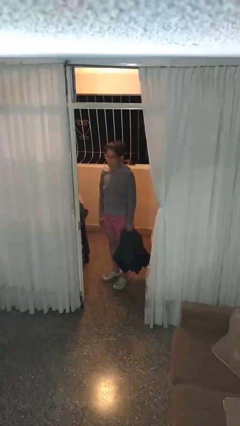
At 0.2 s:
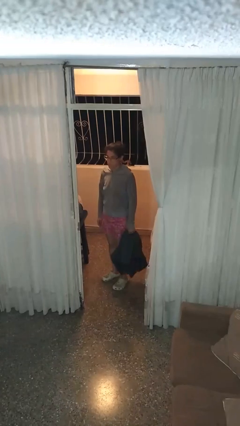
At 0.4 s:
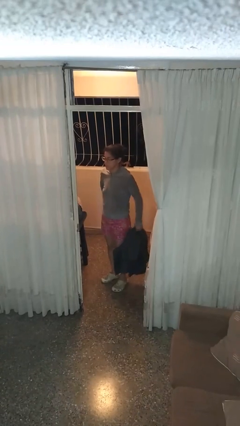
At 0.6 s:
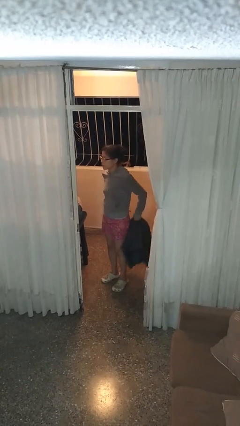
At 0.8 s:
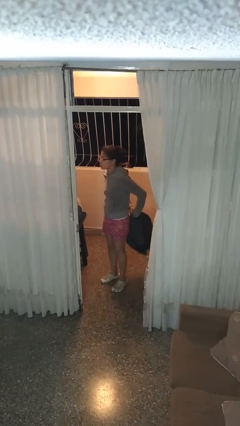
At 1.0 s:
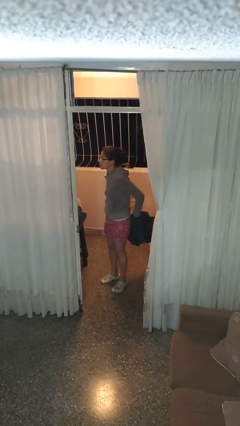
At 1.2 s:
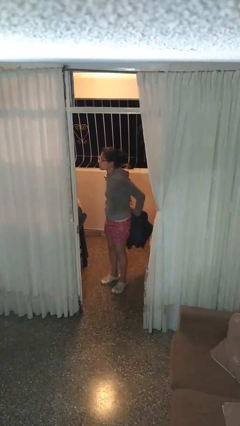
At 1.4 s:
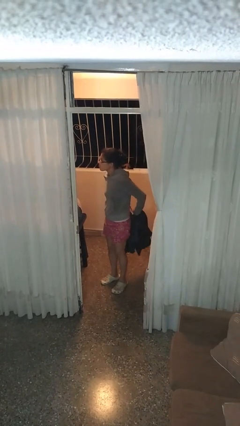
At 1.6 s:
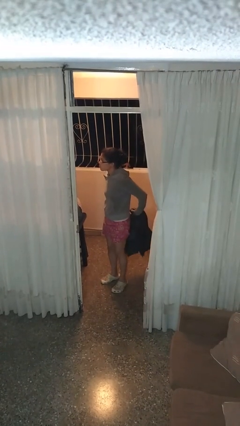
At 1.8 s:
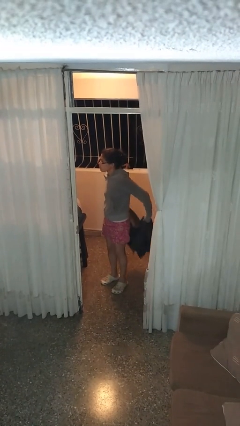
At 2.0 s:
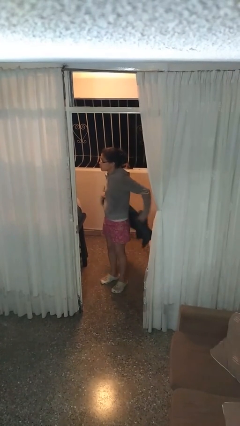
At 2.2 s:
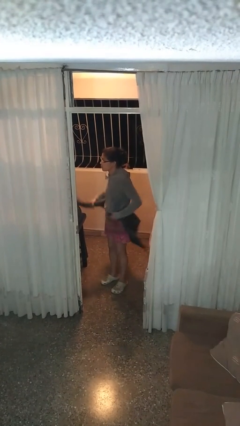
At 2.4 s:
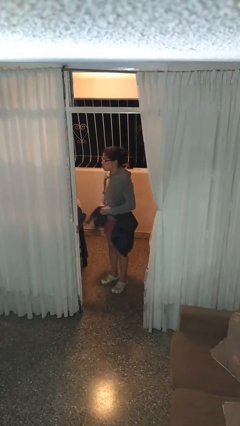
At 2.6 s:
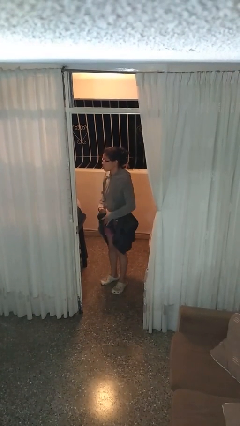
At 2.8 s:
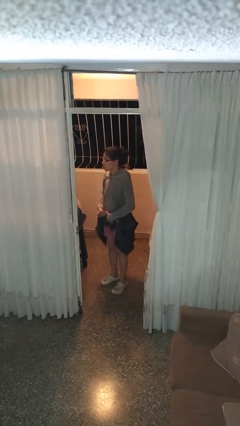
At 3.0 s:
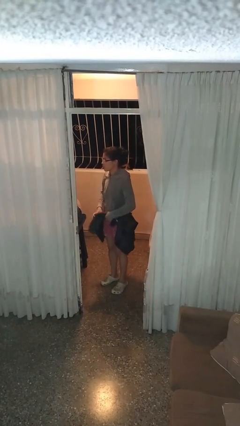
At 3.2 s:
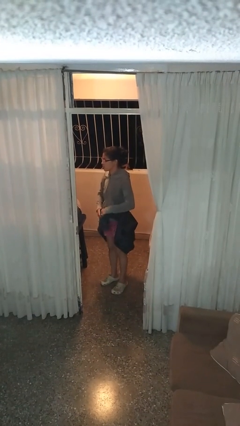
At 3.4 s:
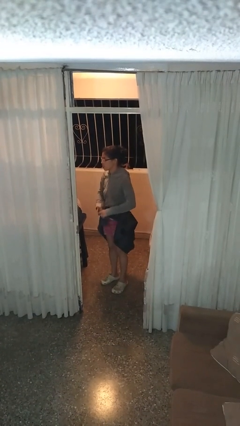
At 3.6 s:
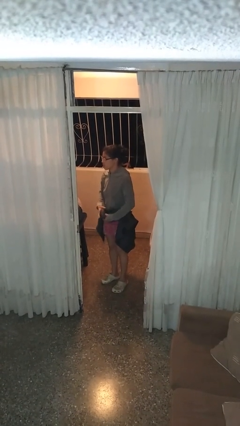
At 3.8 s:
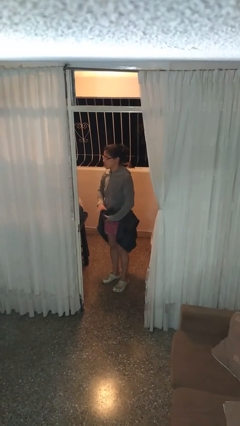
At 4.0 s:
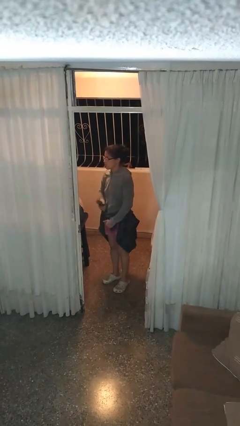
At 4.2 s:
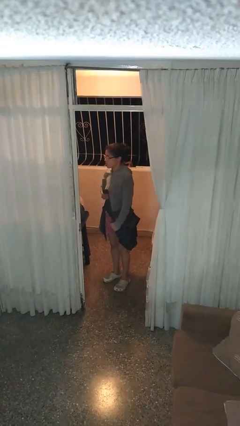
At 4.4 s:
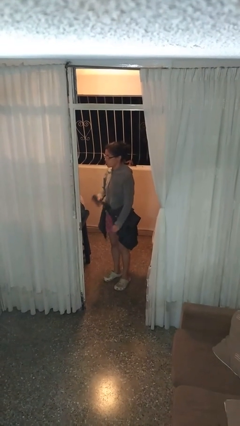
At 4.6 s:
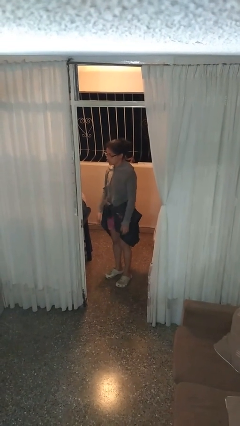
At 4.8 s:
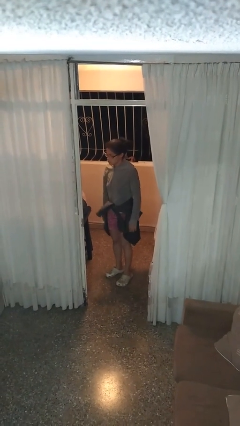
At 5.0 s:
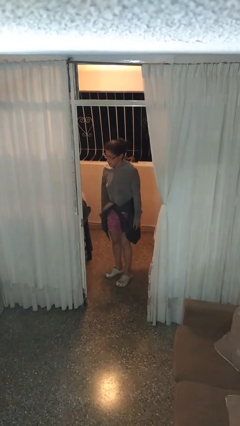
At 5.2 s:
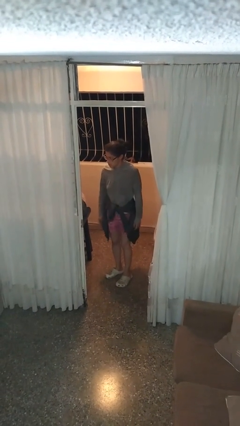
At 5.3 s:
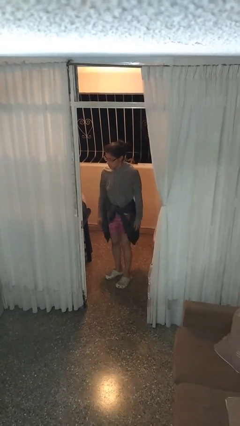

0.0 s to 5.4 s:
person ties jacket around waist

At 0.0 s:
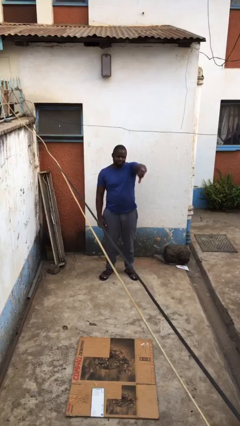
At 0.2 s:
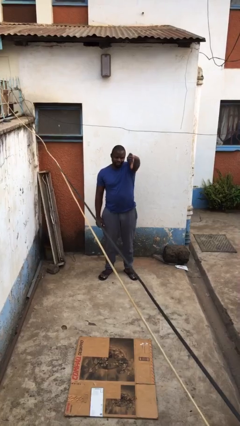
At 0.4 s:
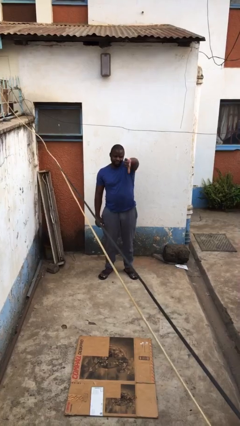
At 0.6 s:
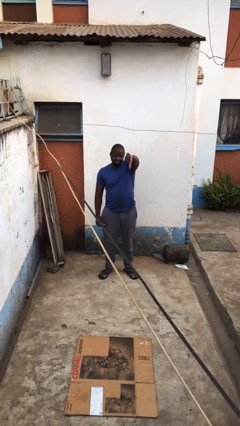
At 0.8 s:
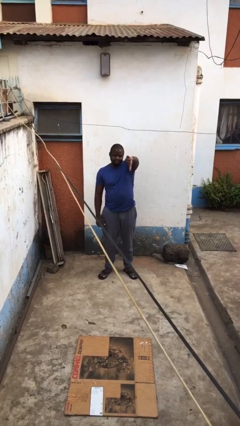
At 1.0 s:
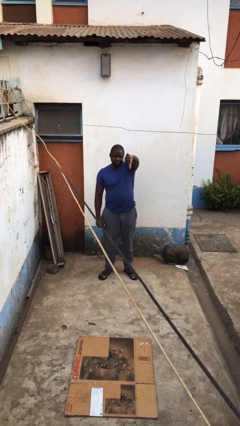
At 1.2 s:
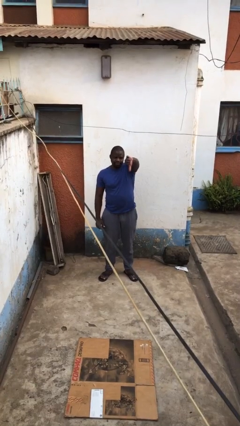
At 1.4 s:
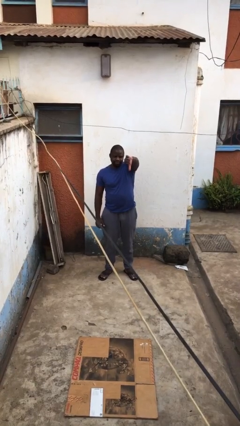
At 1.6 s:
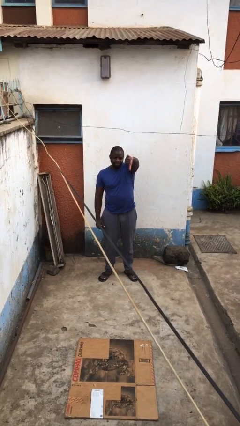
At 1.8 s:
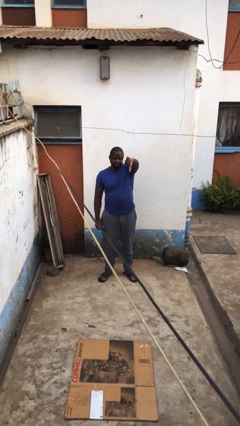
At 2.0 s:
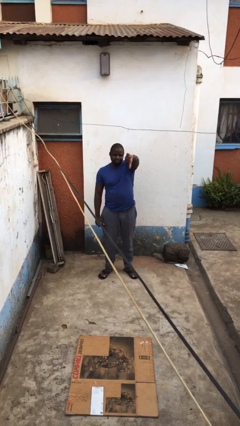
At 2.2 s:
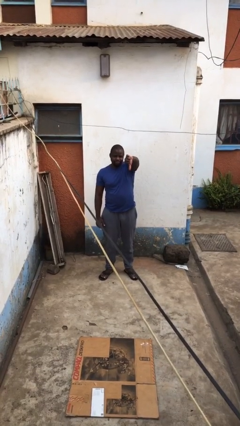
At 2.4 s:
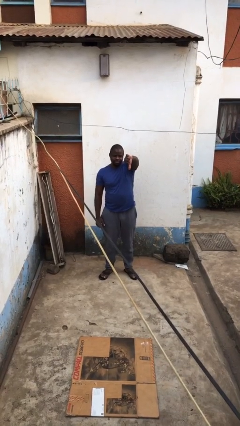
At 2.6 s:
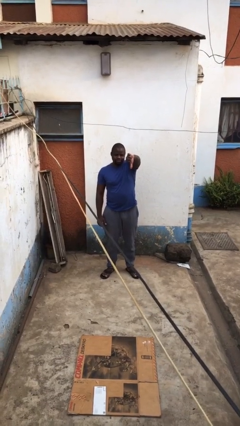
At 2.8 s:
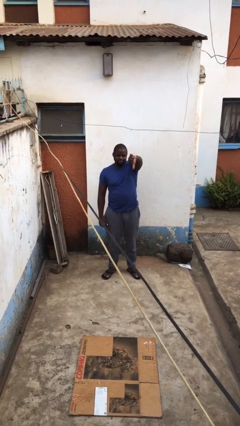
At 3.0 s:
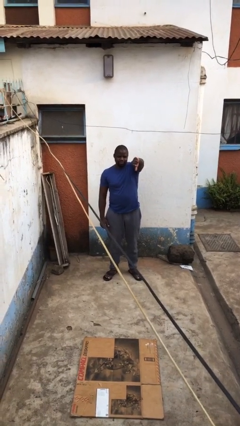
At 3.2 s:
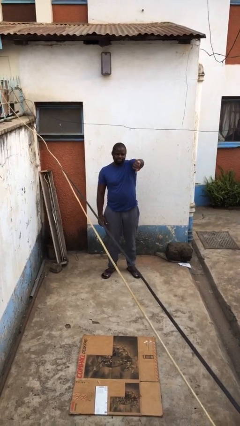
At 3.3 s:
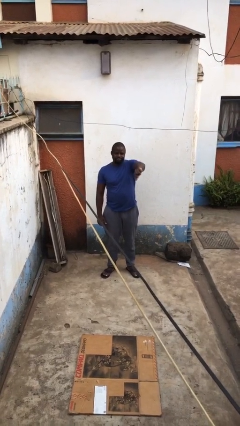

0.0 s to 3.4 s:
person gestures thumbs down

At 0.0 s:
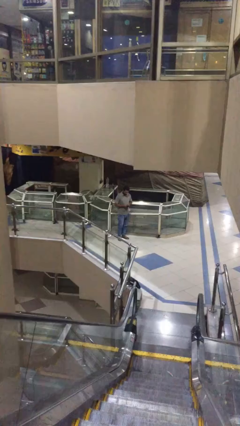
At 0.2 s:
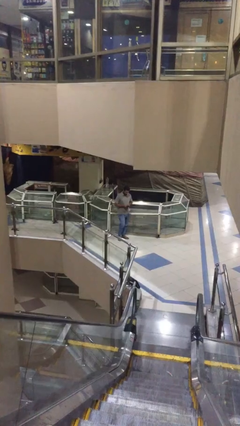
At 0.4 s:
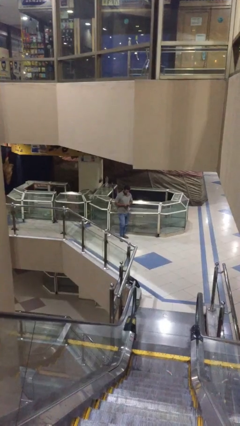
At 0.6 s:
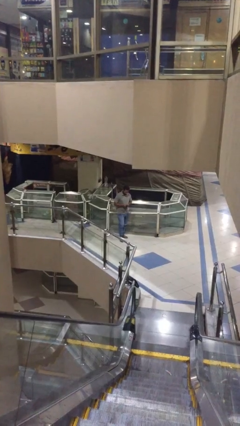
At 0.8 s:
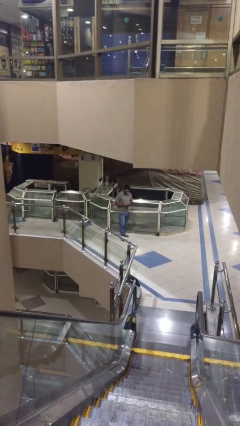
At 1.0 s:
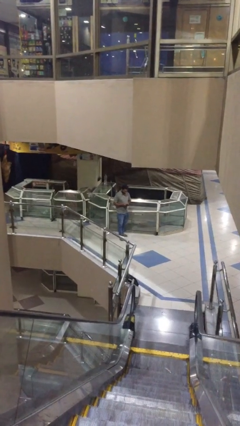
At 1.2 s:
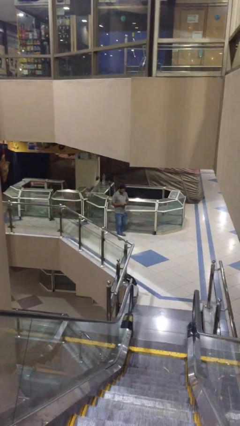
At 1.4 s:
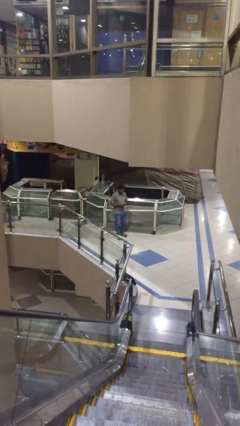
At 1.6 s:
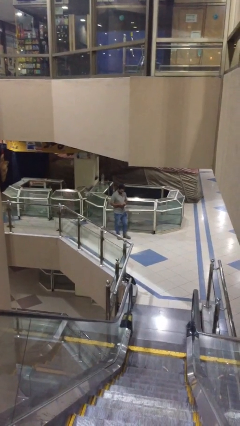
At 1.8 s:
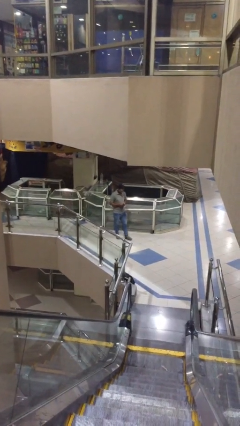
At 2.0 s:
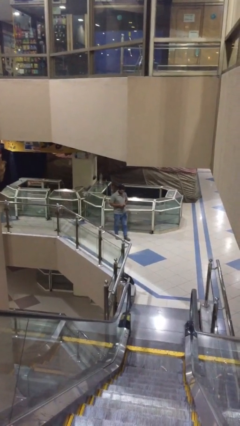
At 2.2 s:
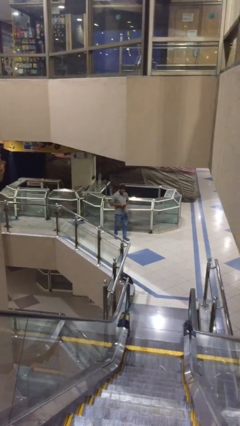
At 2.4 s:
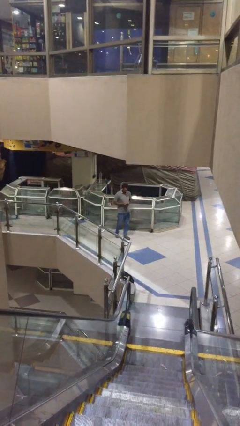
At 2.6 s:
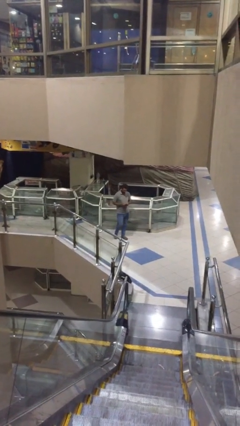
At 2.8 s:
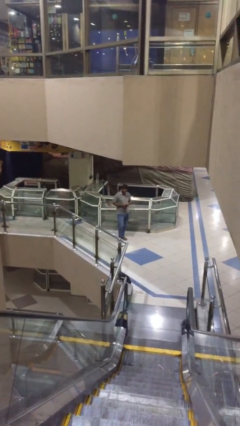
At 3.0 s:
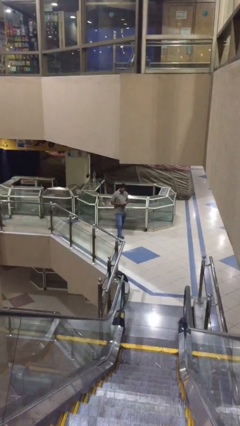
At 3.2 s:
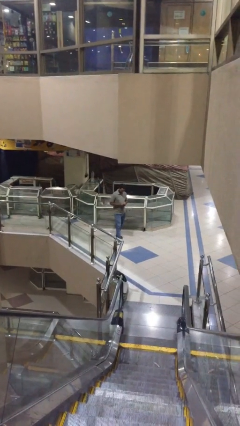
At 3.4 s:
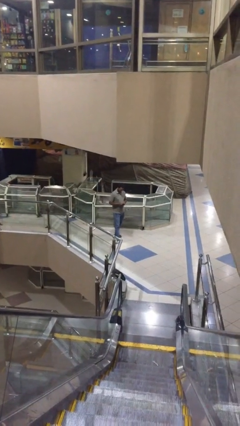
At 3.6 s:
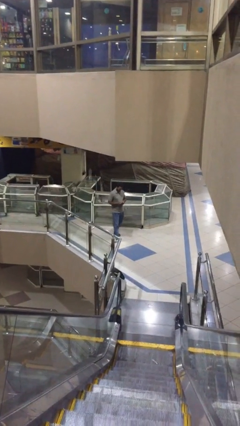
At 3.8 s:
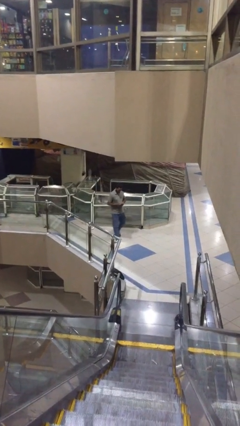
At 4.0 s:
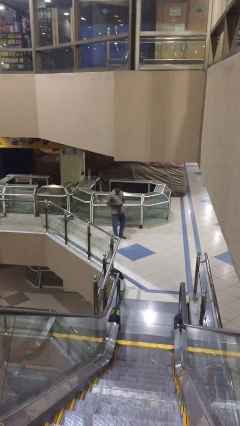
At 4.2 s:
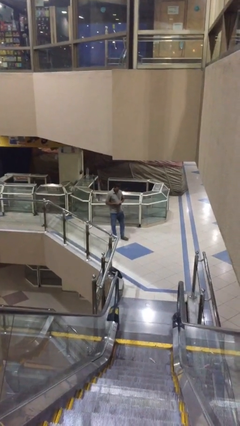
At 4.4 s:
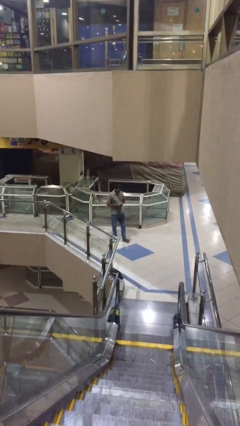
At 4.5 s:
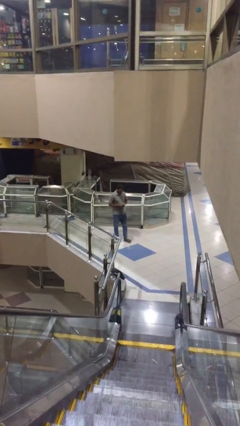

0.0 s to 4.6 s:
person texts on phone

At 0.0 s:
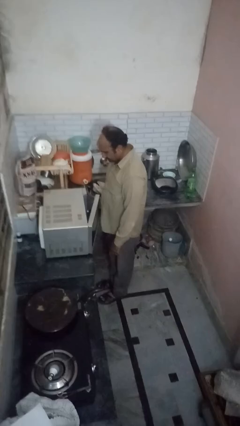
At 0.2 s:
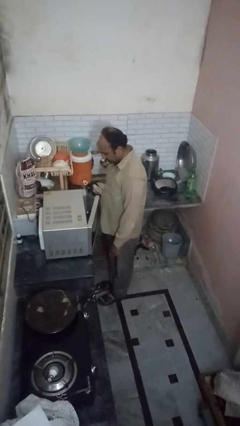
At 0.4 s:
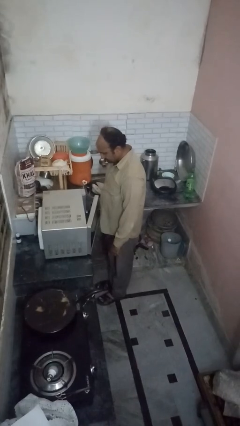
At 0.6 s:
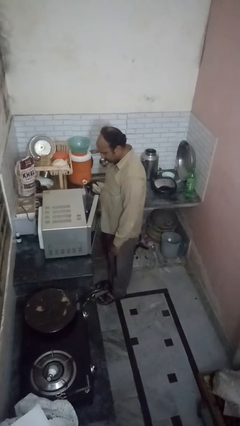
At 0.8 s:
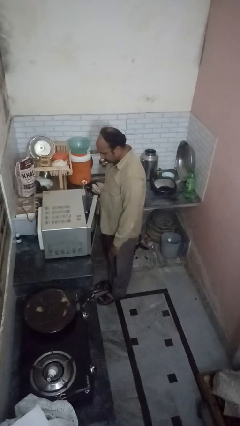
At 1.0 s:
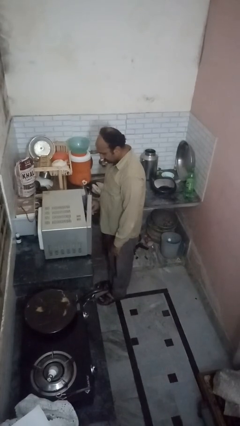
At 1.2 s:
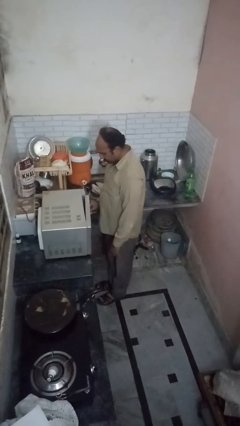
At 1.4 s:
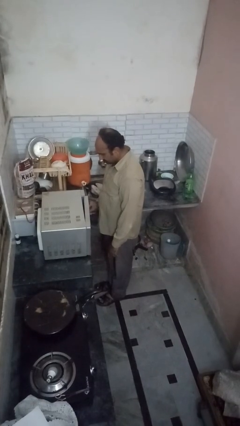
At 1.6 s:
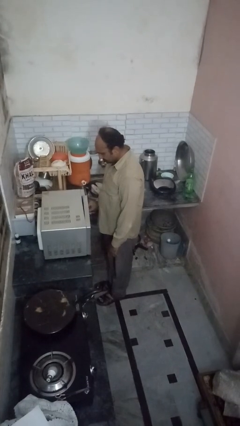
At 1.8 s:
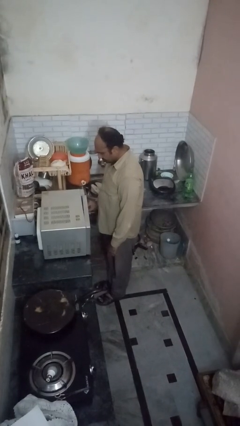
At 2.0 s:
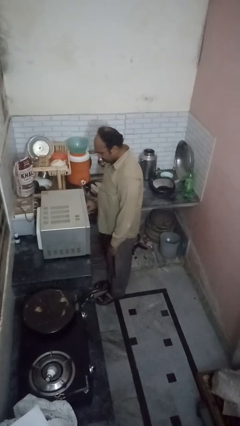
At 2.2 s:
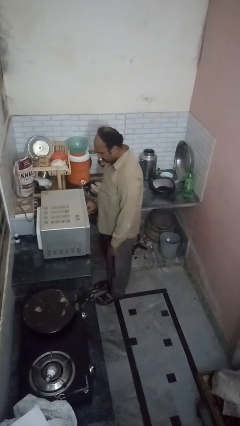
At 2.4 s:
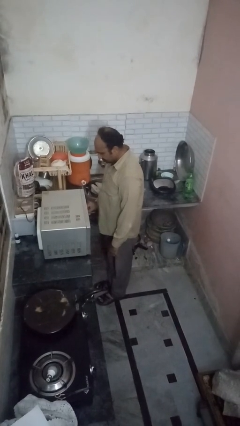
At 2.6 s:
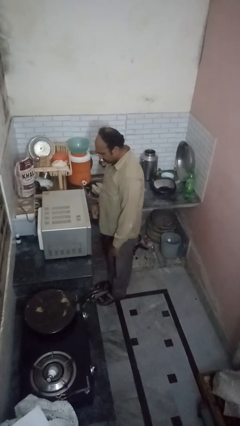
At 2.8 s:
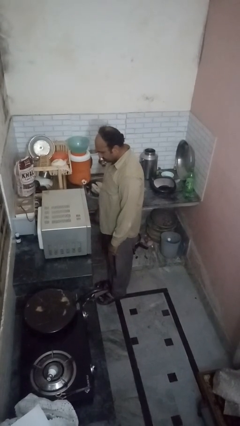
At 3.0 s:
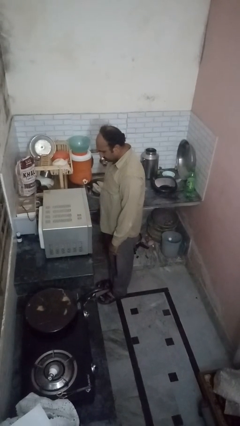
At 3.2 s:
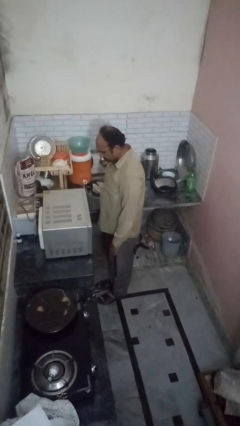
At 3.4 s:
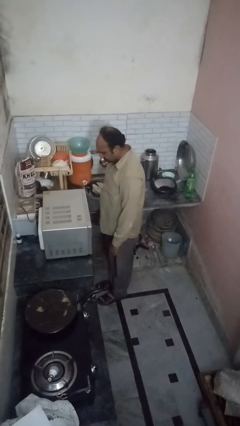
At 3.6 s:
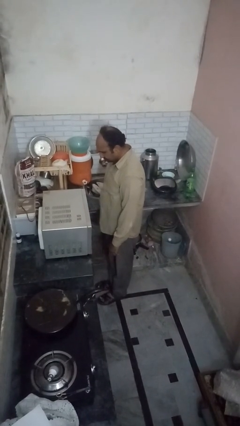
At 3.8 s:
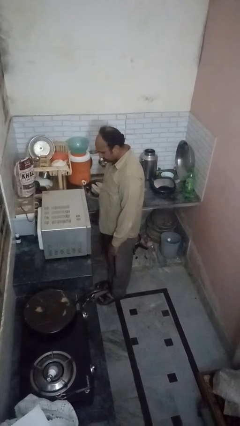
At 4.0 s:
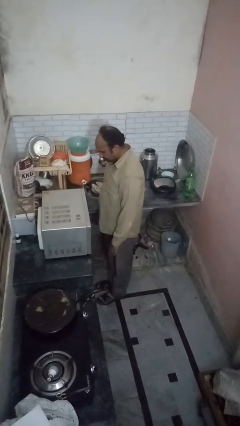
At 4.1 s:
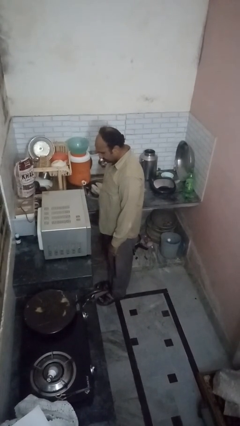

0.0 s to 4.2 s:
person closes oven door
